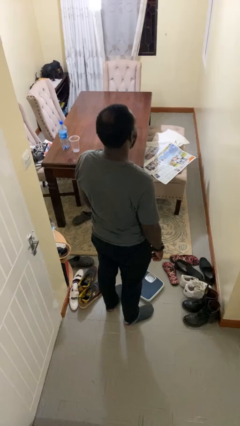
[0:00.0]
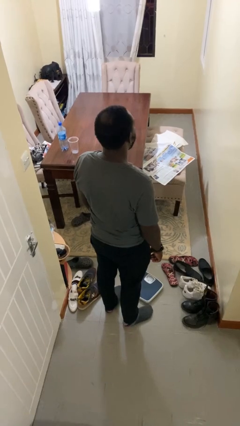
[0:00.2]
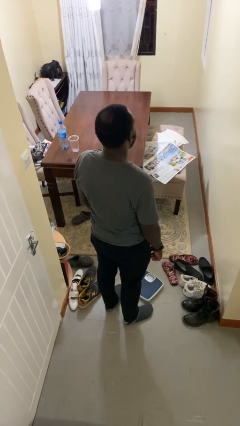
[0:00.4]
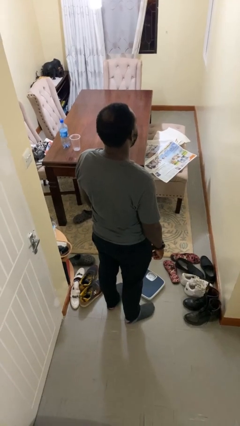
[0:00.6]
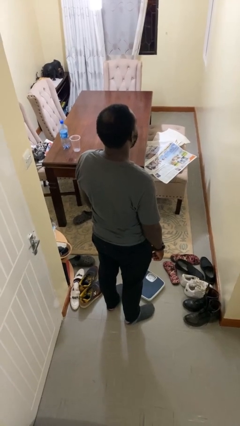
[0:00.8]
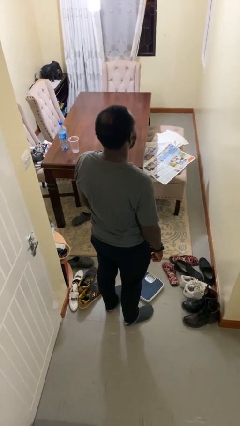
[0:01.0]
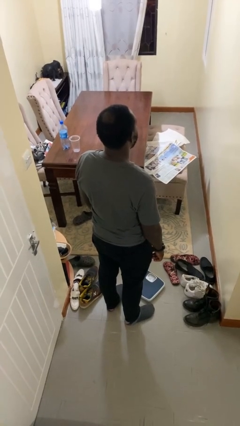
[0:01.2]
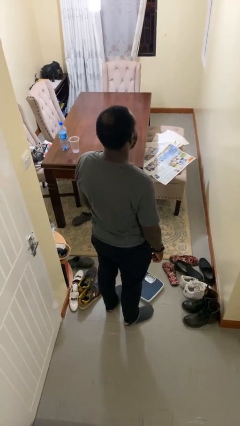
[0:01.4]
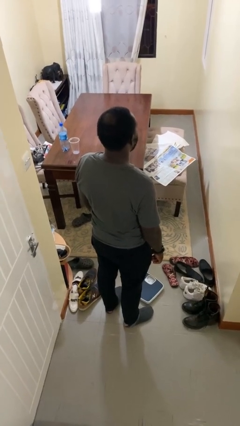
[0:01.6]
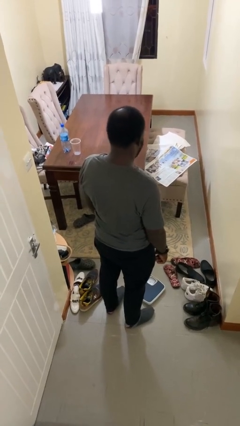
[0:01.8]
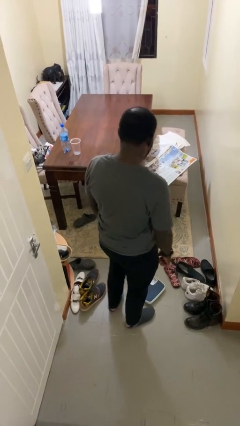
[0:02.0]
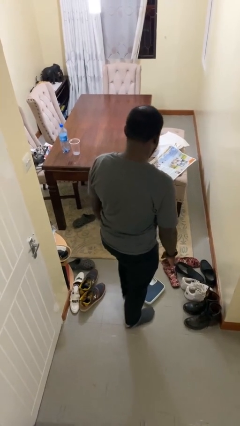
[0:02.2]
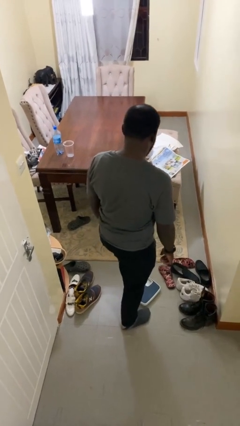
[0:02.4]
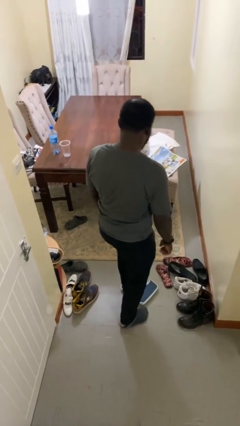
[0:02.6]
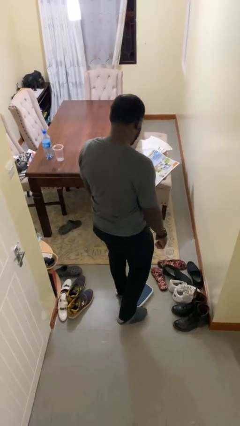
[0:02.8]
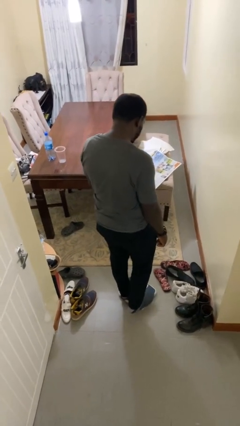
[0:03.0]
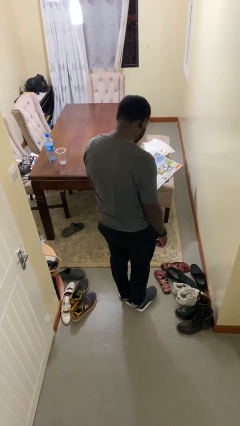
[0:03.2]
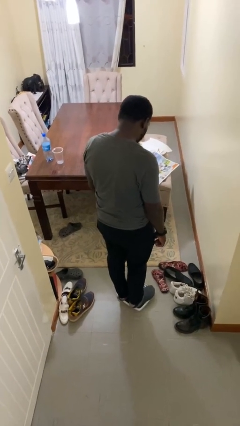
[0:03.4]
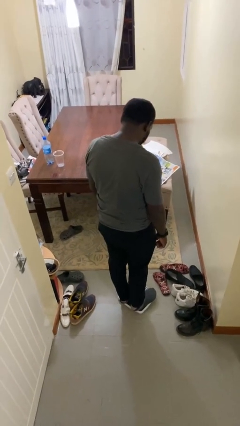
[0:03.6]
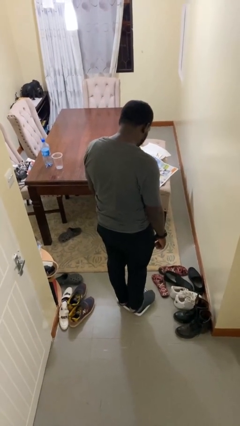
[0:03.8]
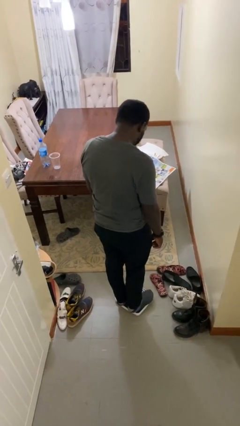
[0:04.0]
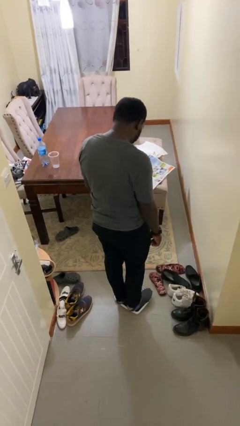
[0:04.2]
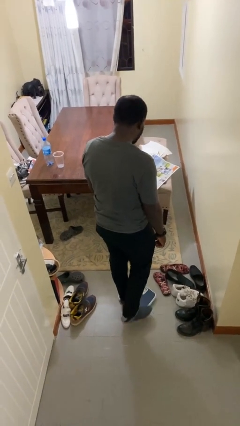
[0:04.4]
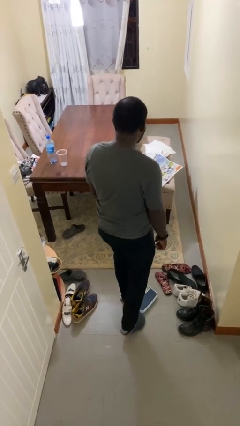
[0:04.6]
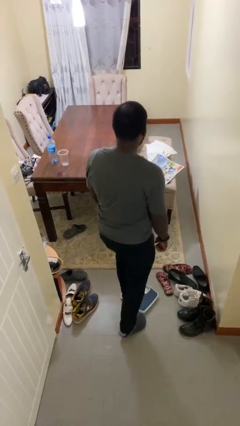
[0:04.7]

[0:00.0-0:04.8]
person uses bodyweight scale

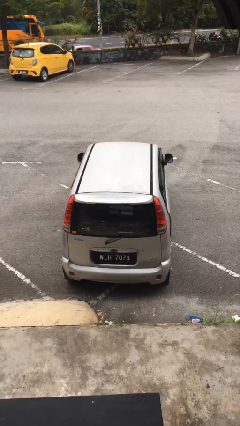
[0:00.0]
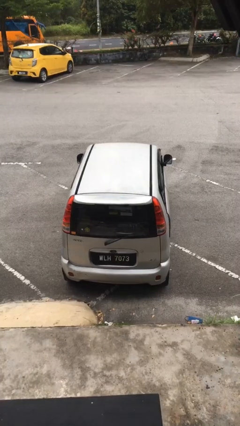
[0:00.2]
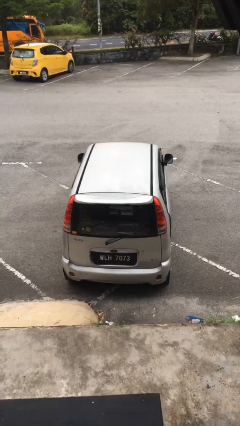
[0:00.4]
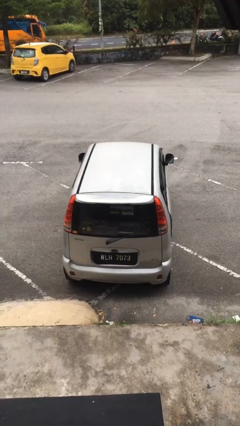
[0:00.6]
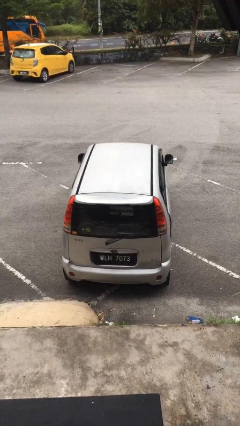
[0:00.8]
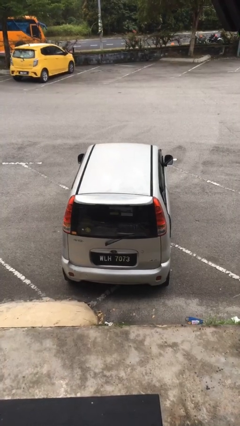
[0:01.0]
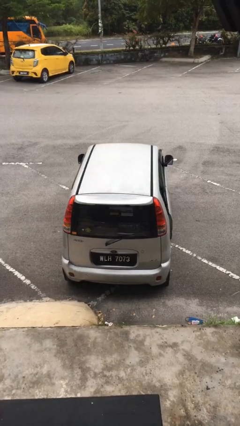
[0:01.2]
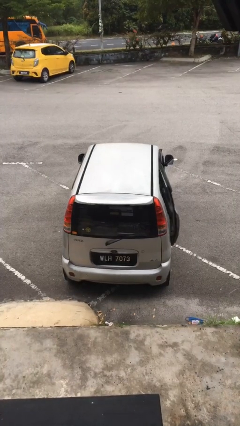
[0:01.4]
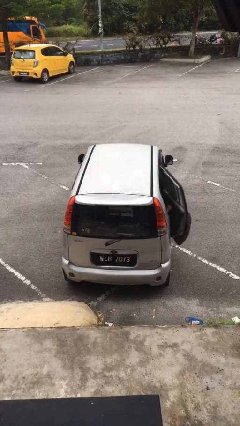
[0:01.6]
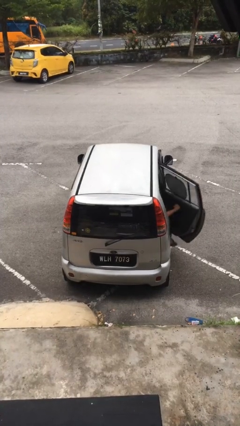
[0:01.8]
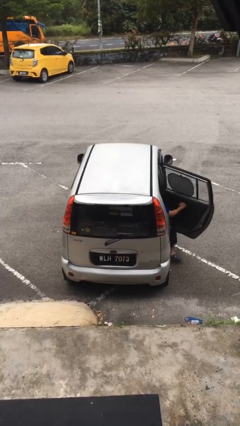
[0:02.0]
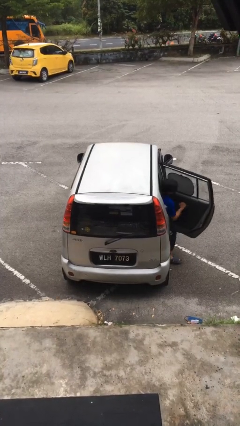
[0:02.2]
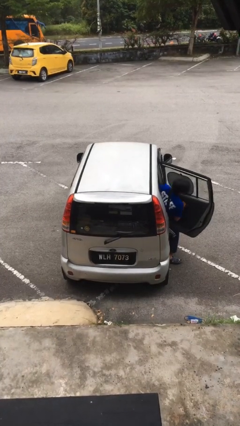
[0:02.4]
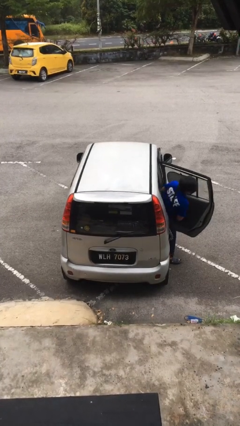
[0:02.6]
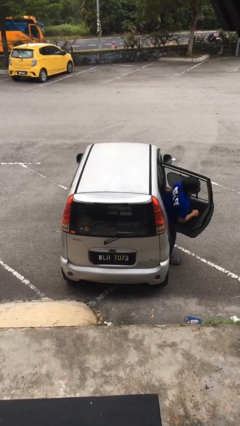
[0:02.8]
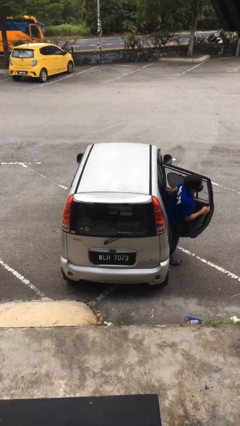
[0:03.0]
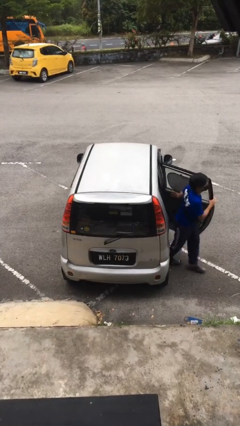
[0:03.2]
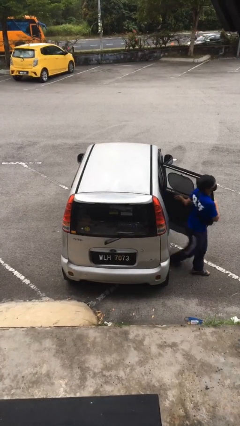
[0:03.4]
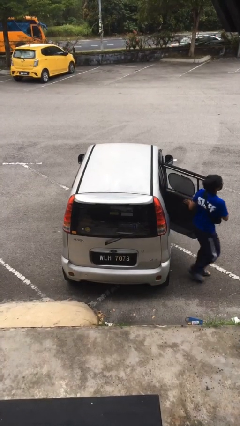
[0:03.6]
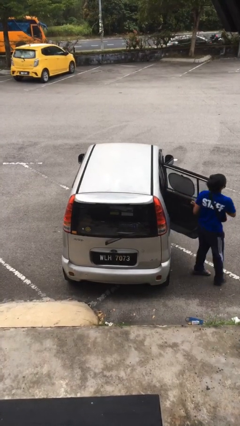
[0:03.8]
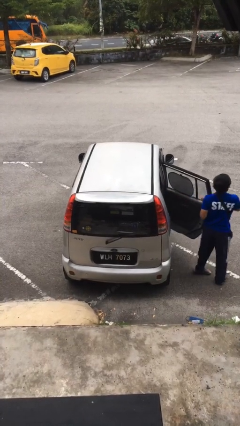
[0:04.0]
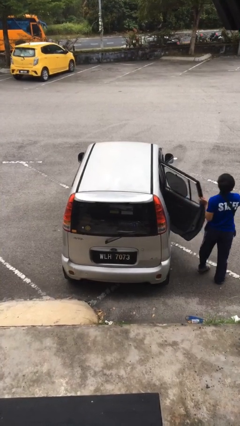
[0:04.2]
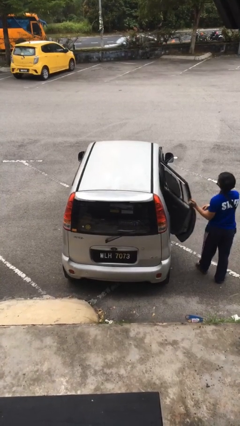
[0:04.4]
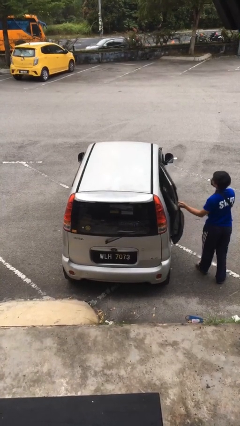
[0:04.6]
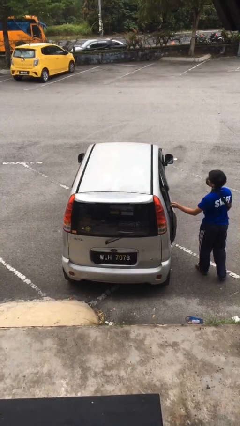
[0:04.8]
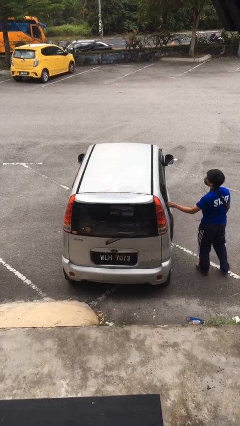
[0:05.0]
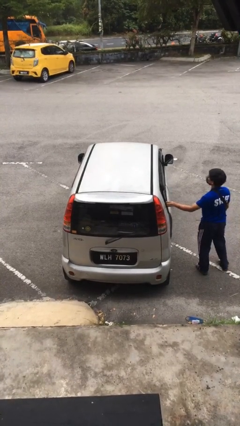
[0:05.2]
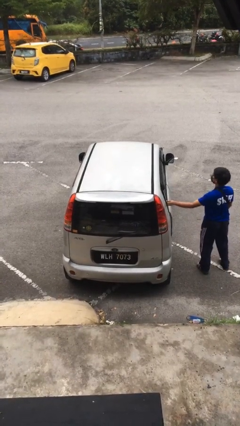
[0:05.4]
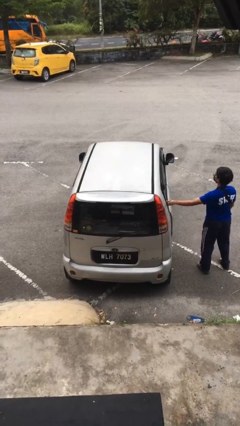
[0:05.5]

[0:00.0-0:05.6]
car drops off person

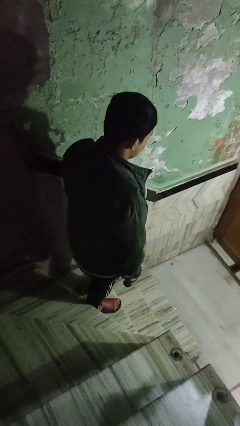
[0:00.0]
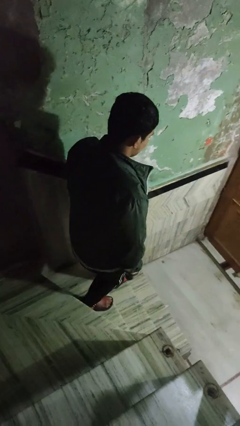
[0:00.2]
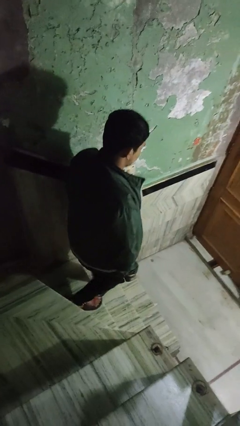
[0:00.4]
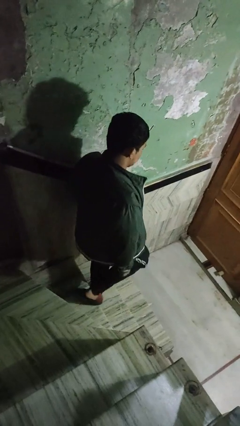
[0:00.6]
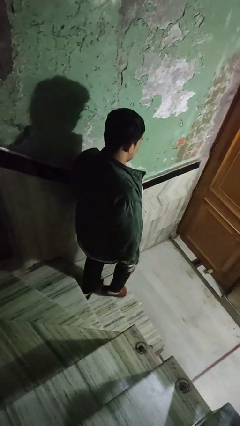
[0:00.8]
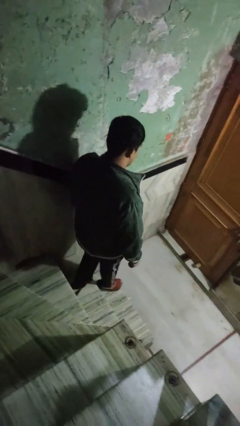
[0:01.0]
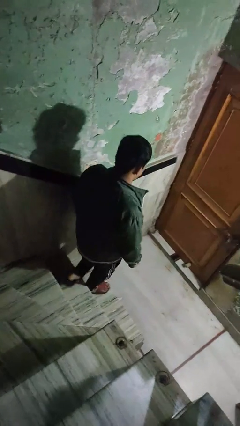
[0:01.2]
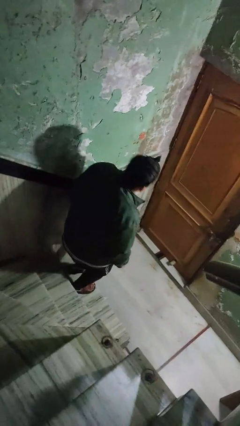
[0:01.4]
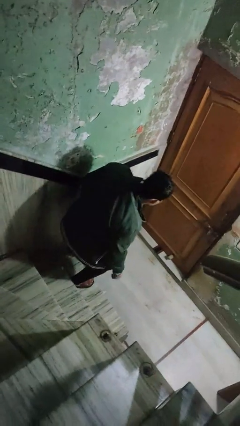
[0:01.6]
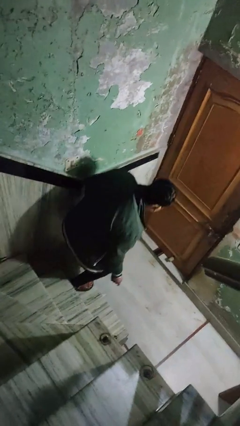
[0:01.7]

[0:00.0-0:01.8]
person climbs down stairs

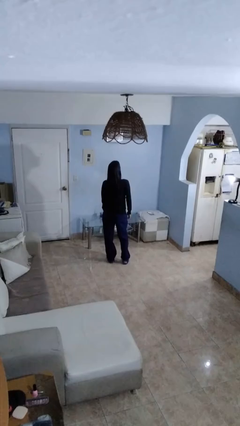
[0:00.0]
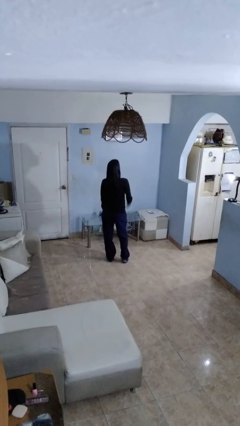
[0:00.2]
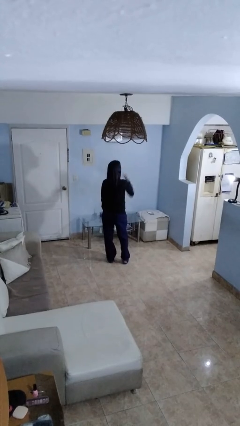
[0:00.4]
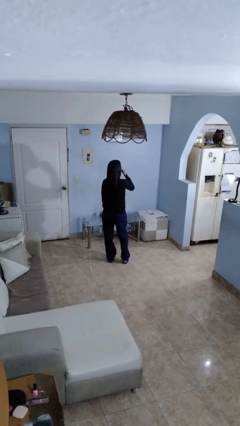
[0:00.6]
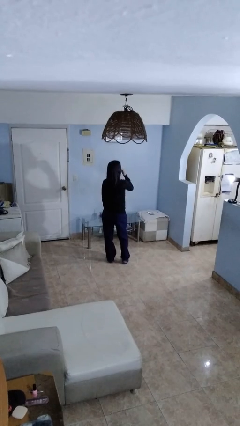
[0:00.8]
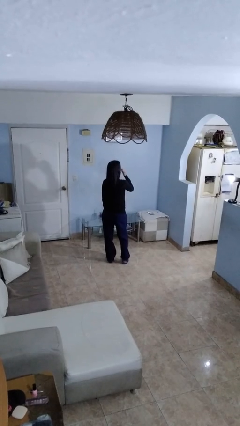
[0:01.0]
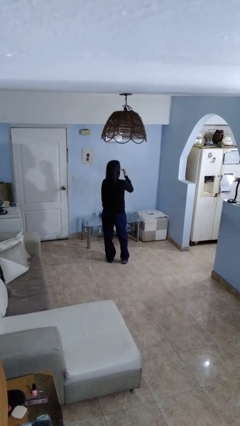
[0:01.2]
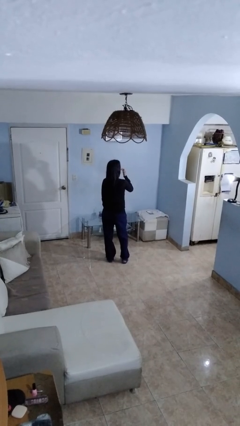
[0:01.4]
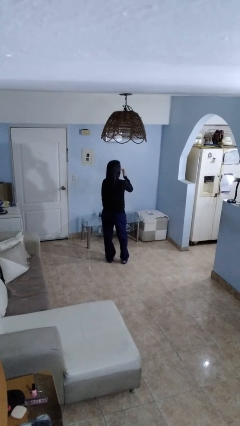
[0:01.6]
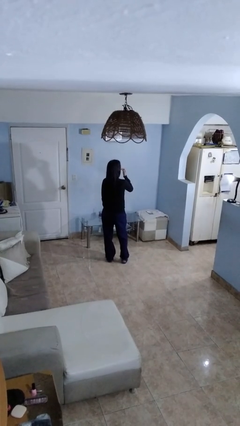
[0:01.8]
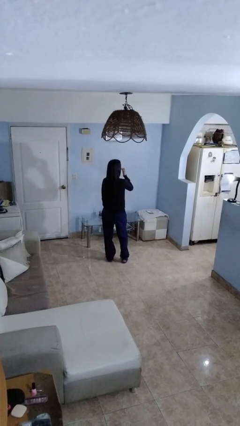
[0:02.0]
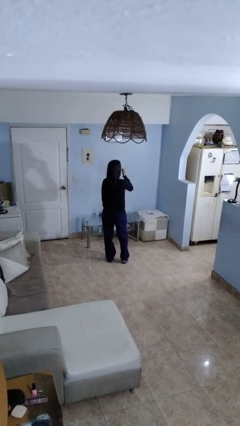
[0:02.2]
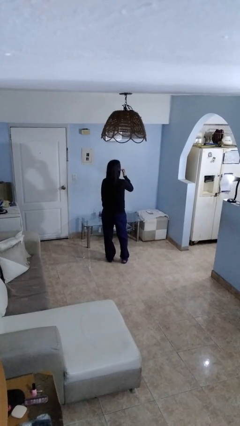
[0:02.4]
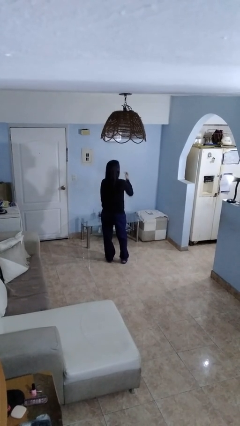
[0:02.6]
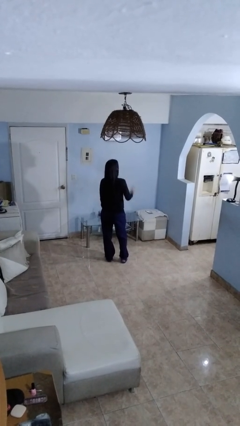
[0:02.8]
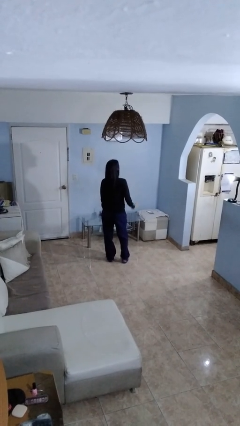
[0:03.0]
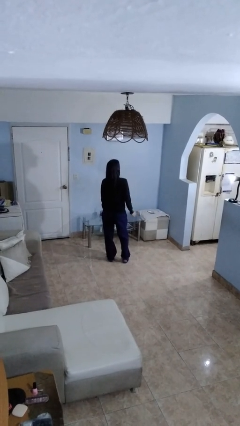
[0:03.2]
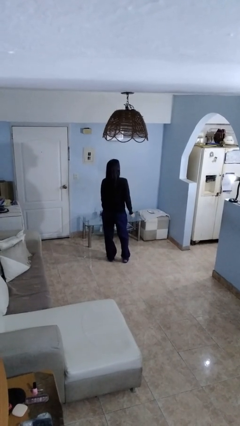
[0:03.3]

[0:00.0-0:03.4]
person licks fingers

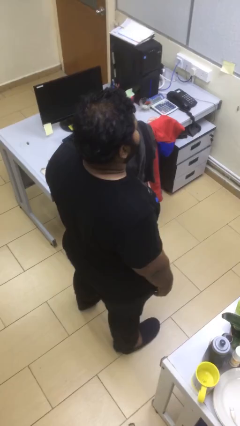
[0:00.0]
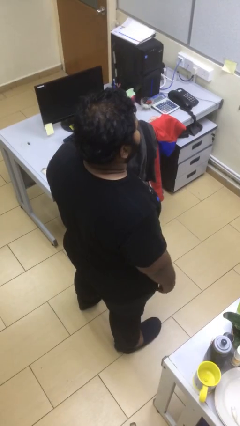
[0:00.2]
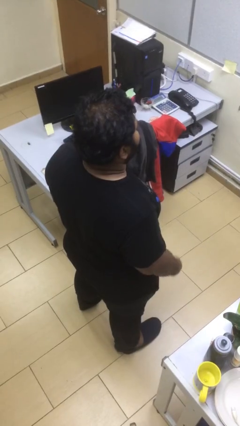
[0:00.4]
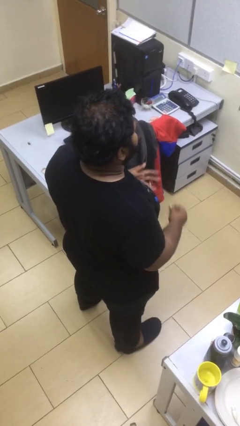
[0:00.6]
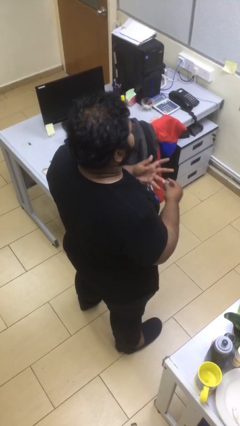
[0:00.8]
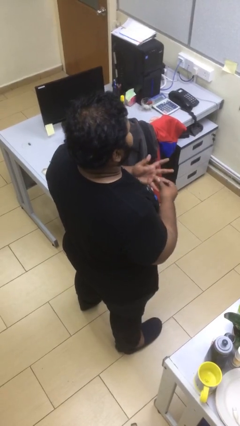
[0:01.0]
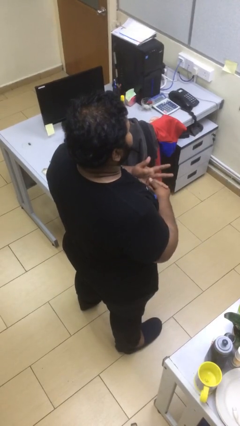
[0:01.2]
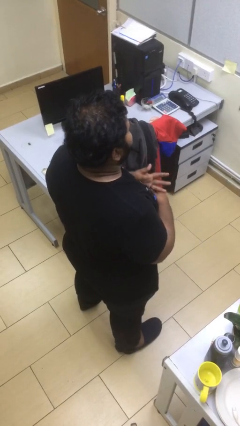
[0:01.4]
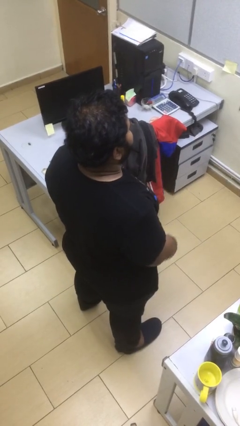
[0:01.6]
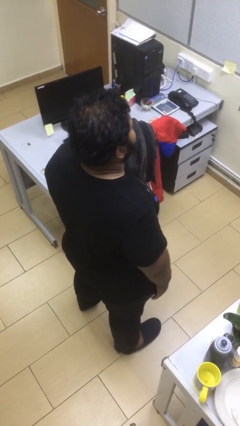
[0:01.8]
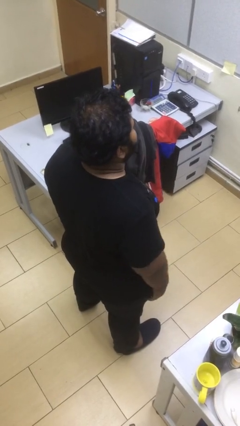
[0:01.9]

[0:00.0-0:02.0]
person puts on ring

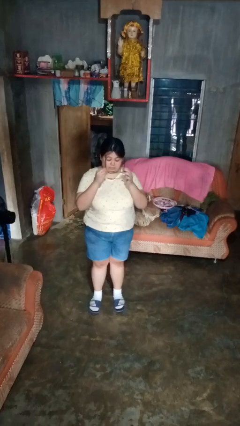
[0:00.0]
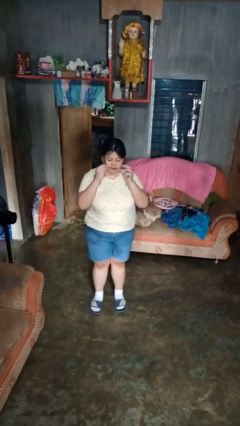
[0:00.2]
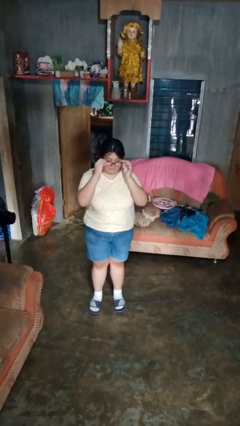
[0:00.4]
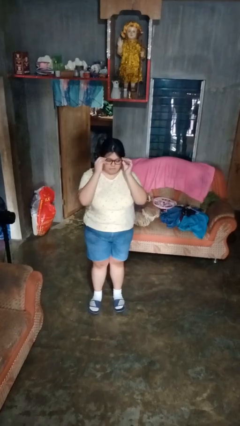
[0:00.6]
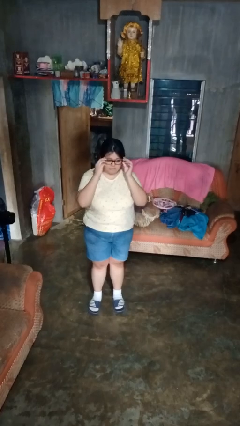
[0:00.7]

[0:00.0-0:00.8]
person puts on glasses
